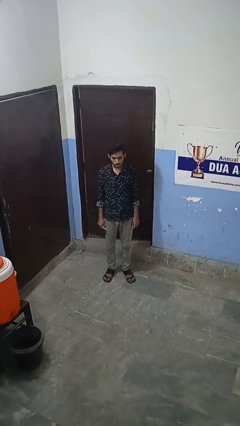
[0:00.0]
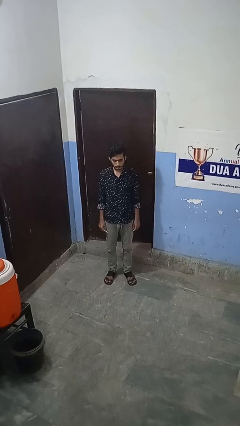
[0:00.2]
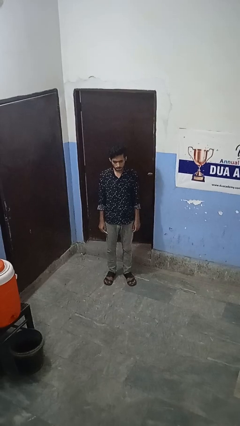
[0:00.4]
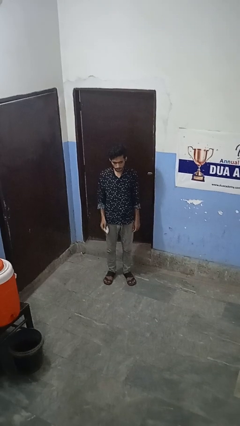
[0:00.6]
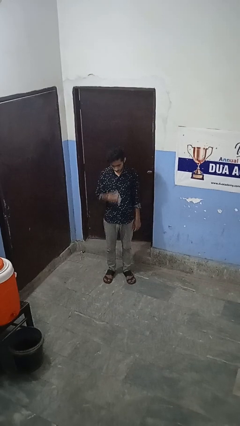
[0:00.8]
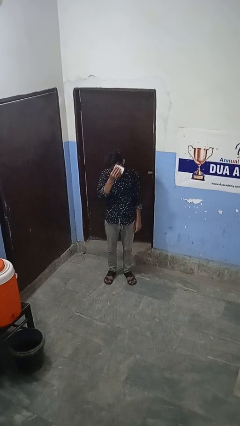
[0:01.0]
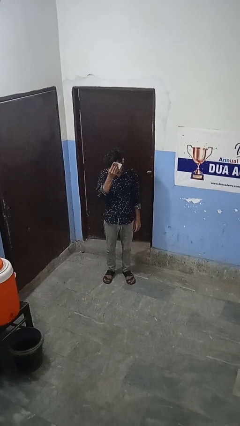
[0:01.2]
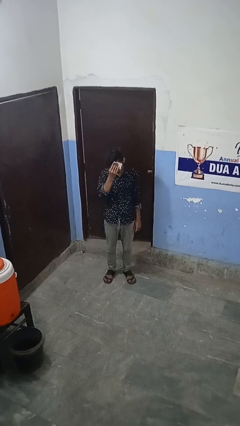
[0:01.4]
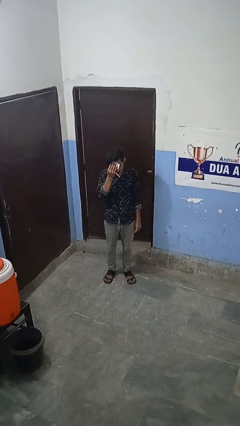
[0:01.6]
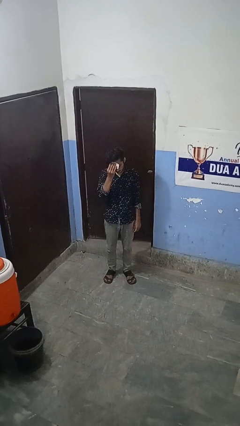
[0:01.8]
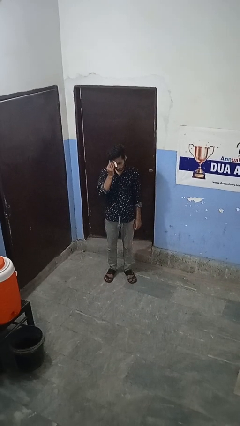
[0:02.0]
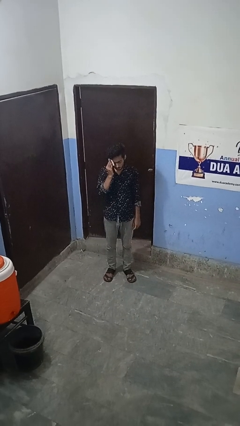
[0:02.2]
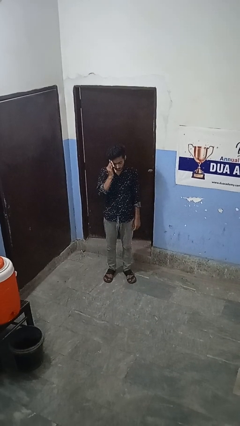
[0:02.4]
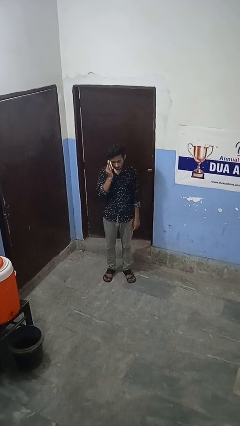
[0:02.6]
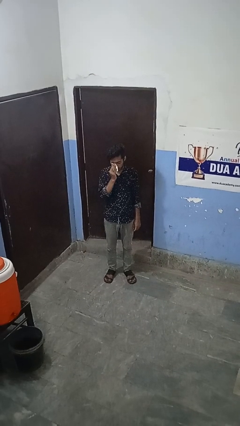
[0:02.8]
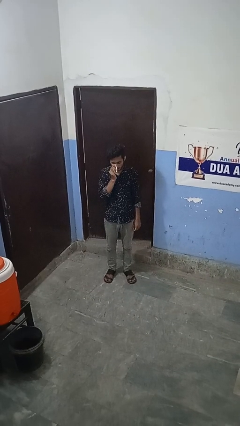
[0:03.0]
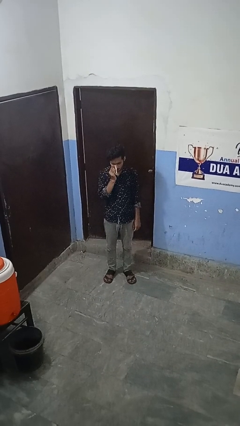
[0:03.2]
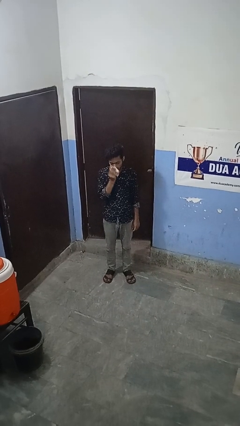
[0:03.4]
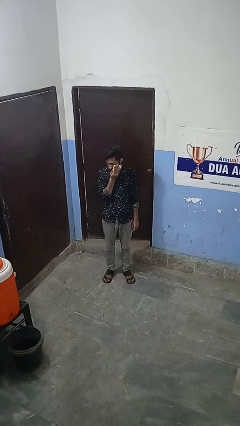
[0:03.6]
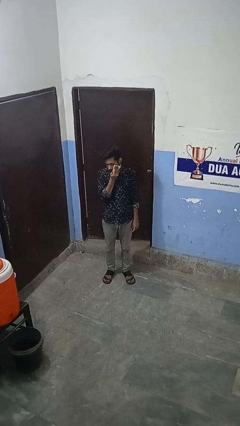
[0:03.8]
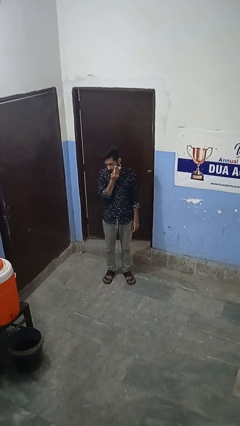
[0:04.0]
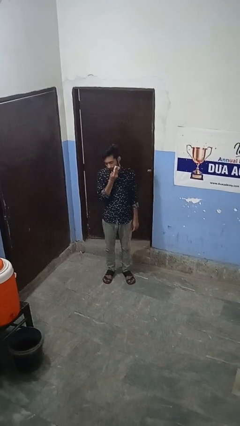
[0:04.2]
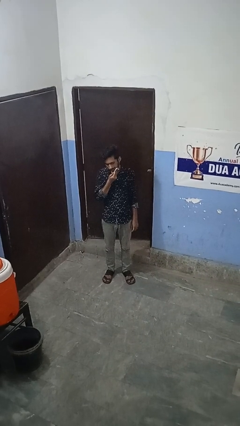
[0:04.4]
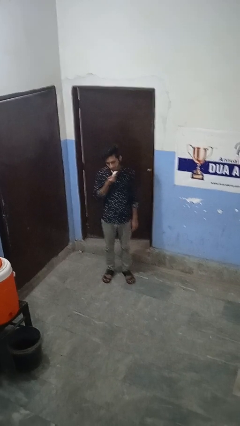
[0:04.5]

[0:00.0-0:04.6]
person wipes mouth with napkin

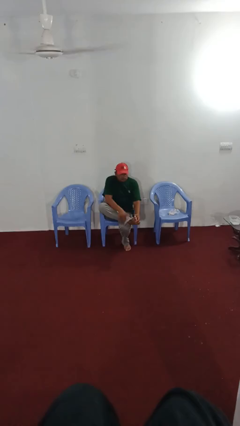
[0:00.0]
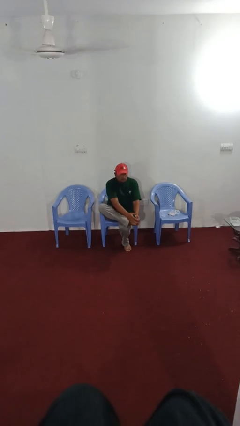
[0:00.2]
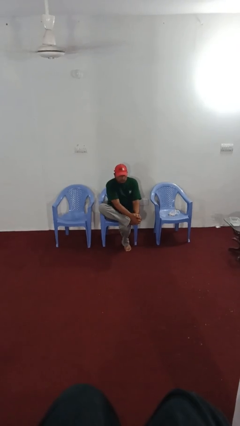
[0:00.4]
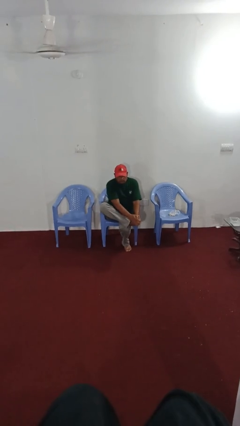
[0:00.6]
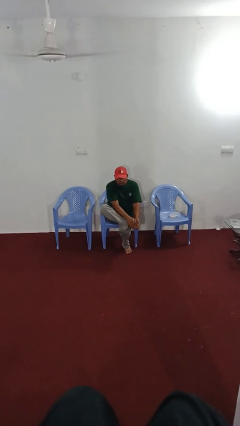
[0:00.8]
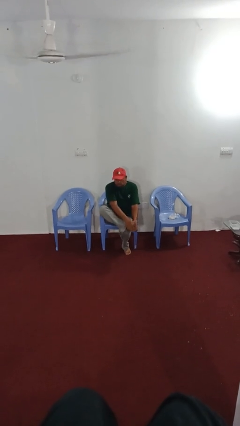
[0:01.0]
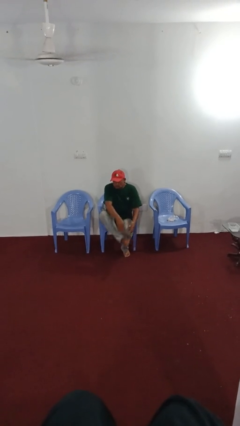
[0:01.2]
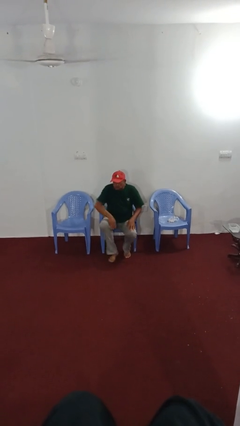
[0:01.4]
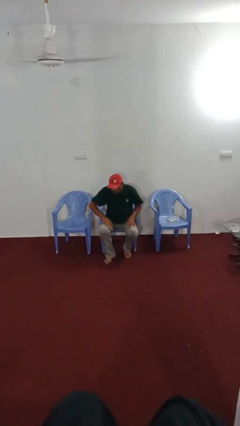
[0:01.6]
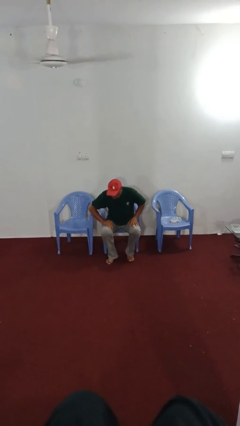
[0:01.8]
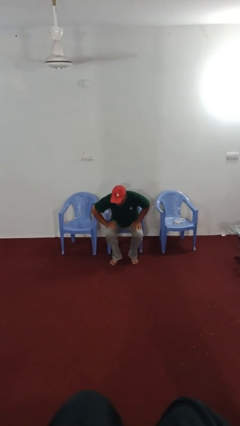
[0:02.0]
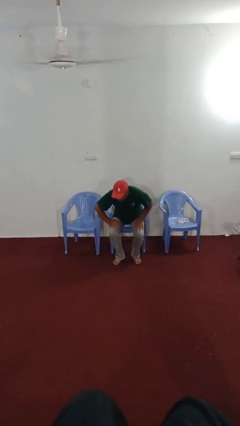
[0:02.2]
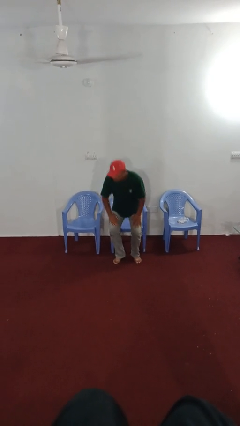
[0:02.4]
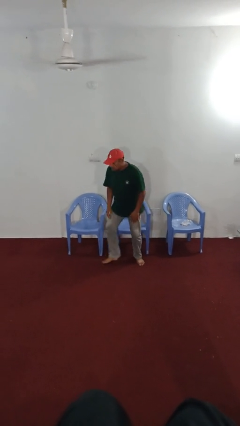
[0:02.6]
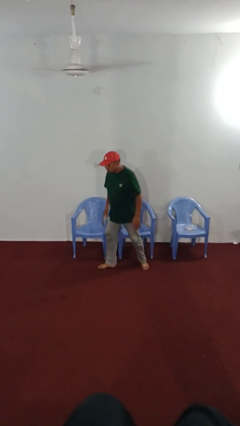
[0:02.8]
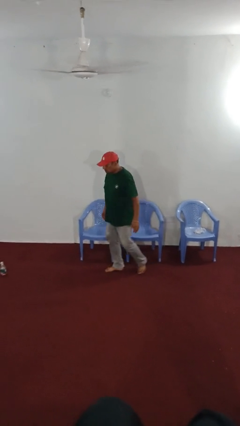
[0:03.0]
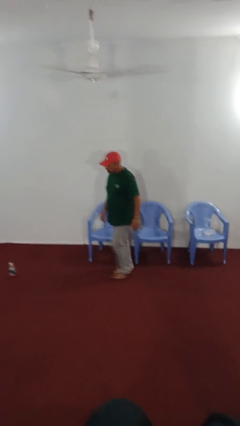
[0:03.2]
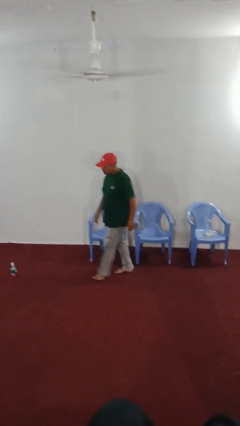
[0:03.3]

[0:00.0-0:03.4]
person stubs toe

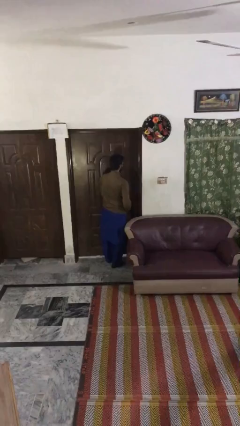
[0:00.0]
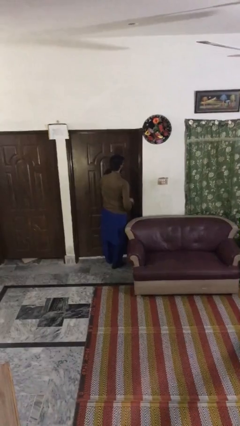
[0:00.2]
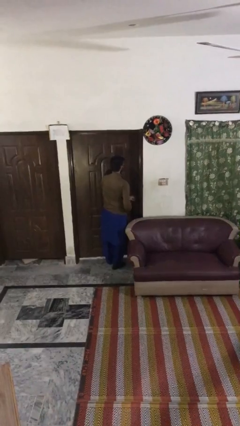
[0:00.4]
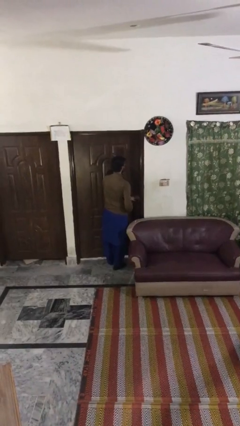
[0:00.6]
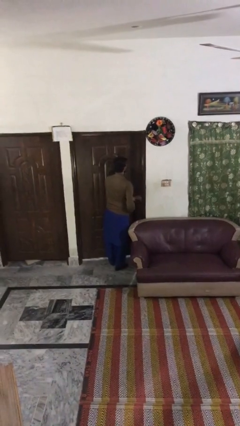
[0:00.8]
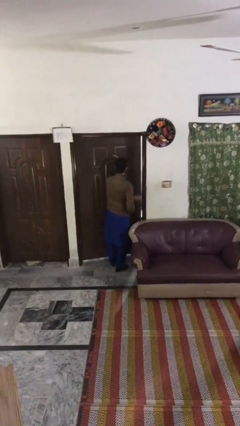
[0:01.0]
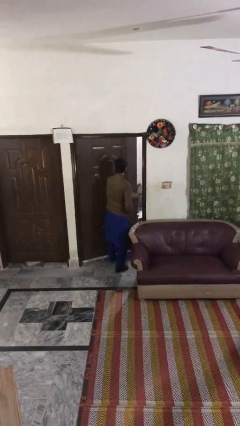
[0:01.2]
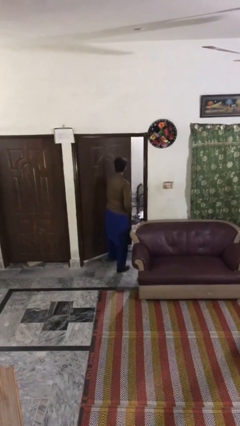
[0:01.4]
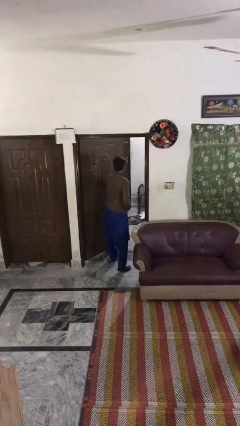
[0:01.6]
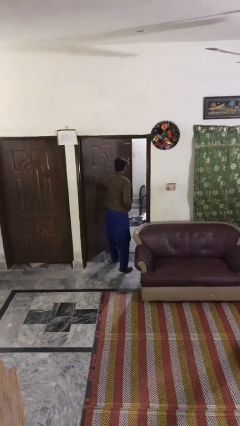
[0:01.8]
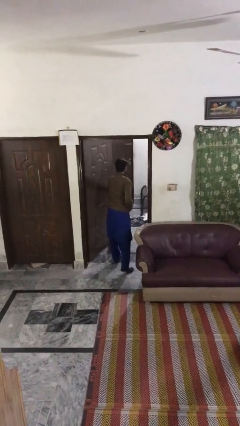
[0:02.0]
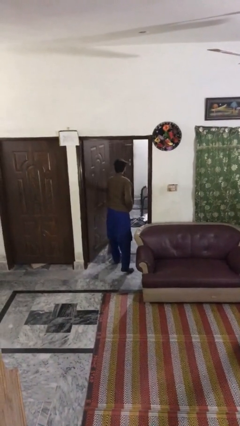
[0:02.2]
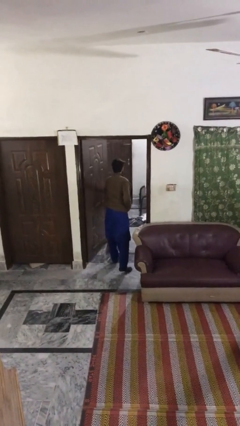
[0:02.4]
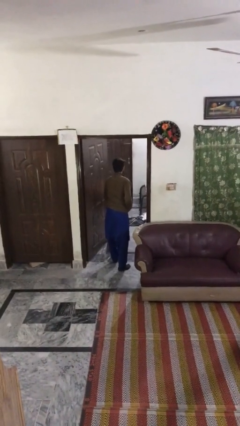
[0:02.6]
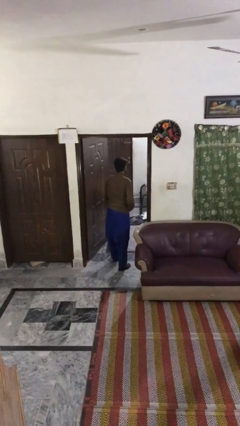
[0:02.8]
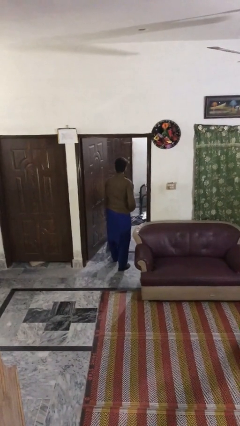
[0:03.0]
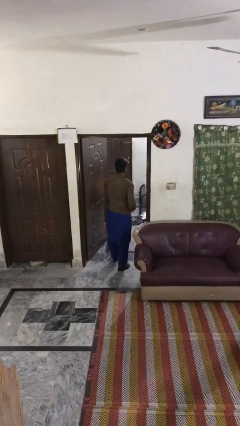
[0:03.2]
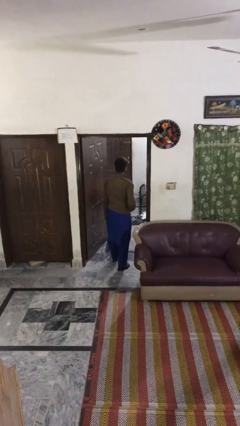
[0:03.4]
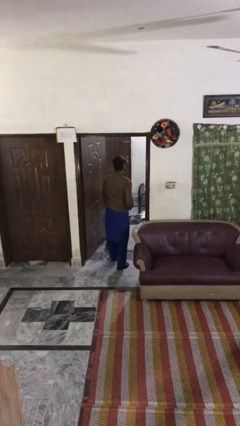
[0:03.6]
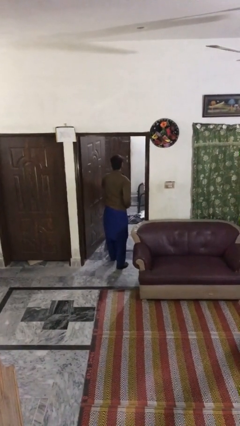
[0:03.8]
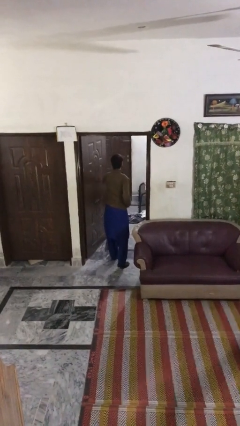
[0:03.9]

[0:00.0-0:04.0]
person opens facility door

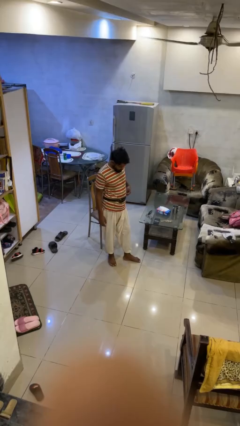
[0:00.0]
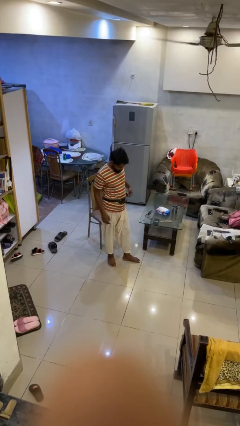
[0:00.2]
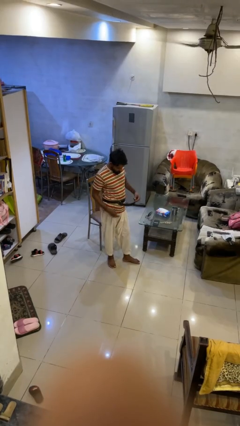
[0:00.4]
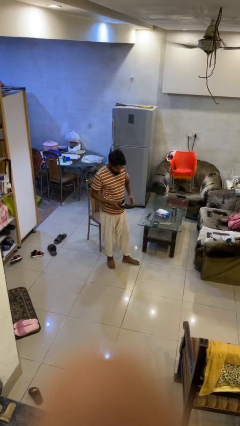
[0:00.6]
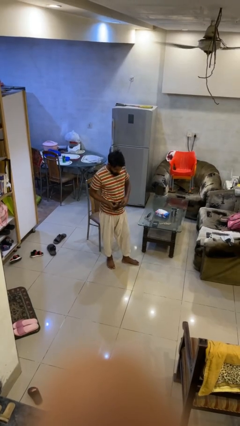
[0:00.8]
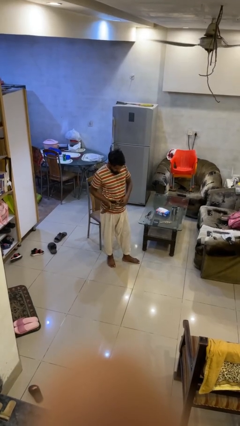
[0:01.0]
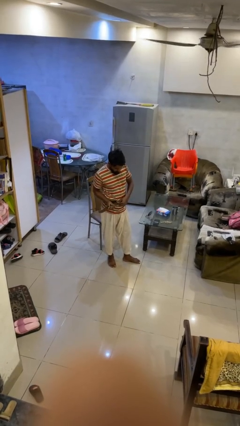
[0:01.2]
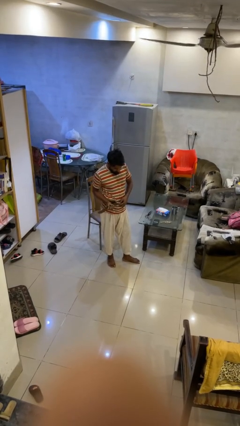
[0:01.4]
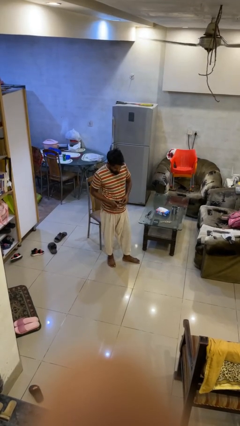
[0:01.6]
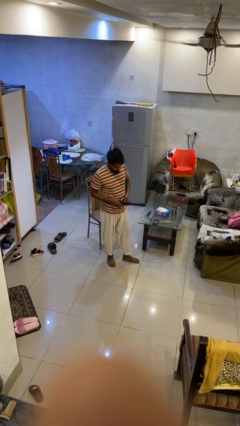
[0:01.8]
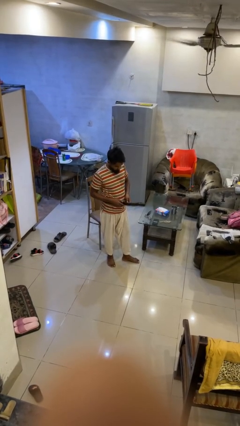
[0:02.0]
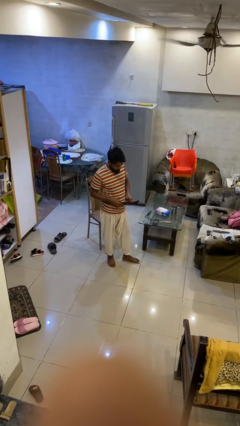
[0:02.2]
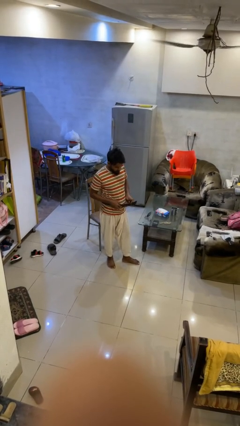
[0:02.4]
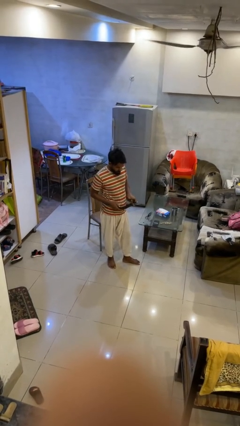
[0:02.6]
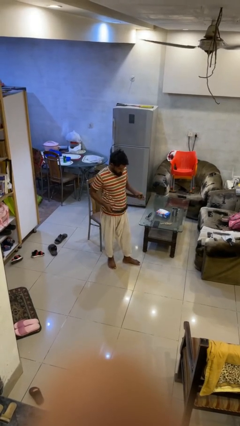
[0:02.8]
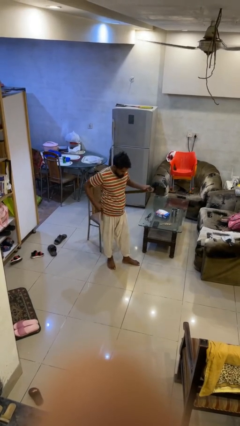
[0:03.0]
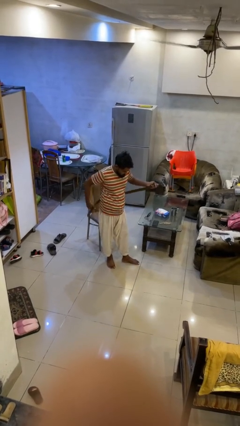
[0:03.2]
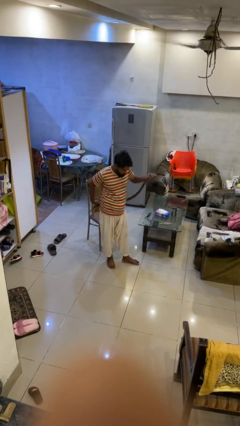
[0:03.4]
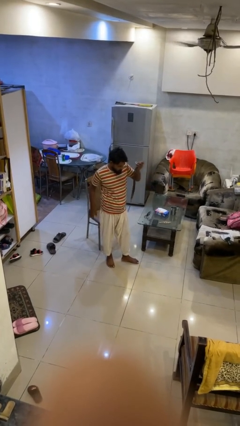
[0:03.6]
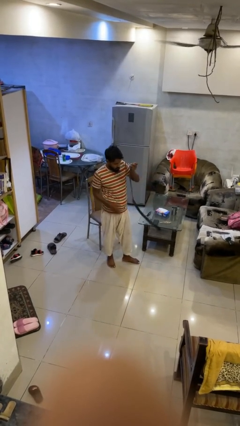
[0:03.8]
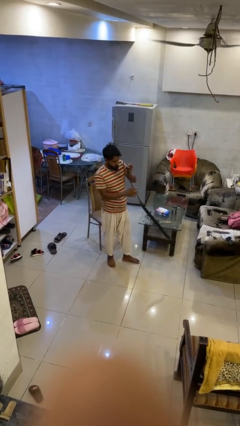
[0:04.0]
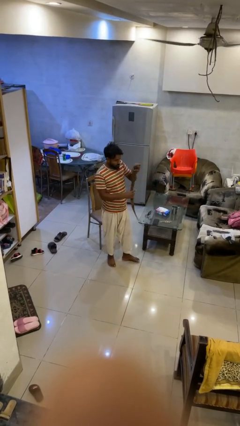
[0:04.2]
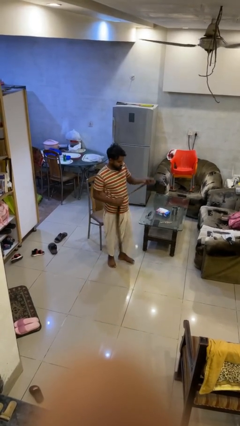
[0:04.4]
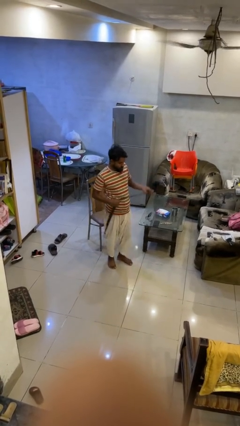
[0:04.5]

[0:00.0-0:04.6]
person takes off belt

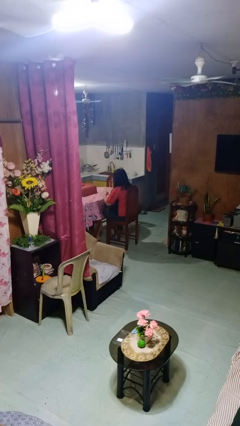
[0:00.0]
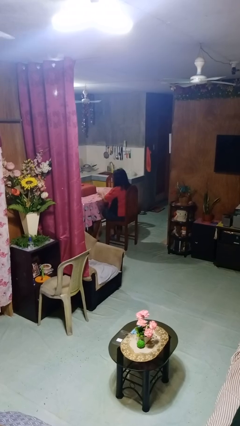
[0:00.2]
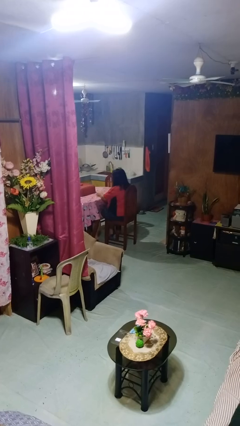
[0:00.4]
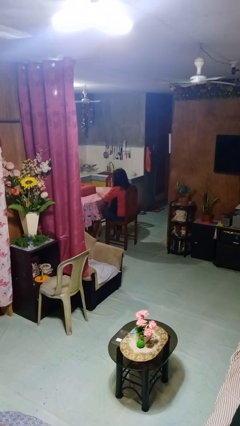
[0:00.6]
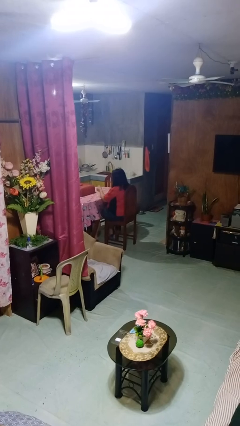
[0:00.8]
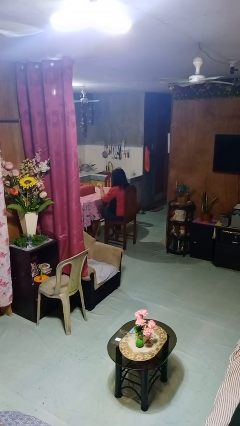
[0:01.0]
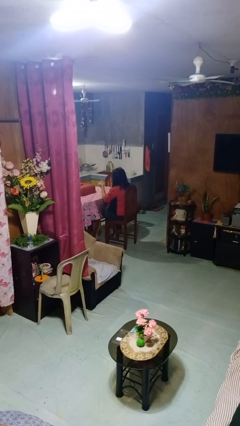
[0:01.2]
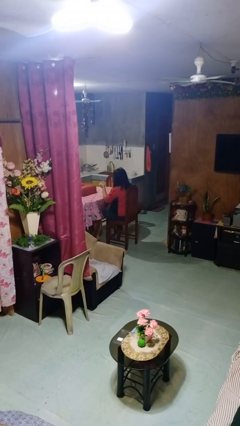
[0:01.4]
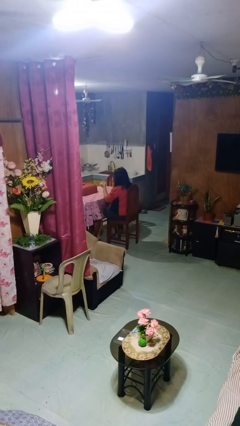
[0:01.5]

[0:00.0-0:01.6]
person picks up object from table
